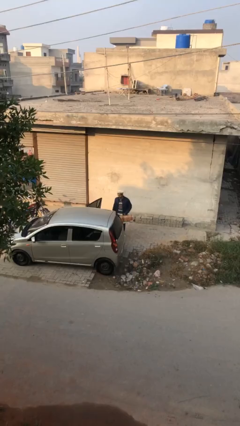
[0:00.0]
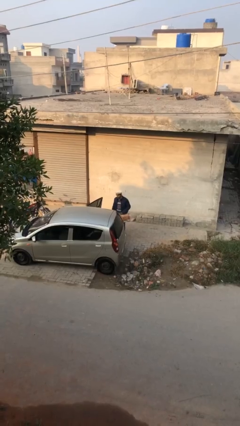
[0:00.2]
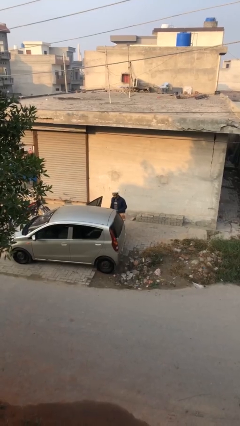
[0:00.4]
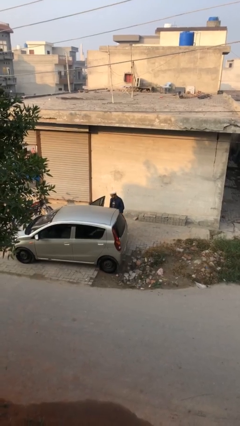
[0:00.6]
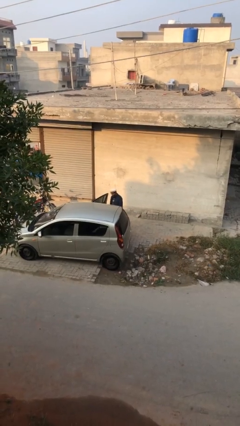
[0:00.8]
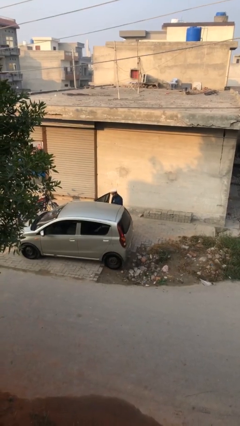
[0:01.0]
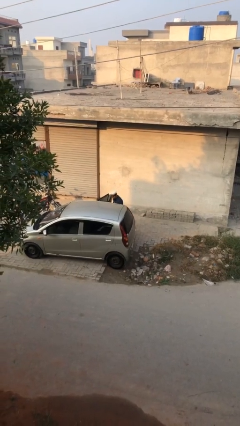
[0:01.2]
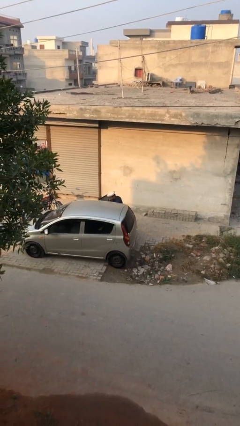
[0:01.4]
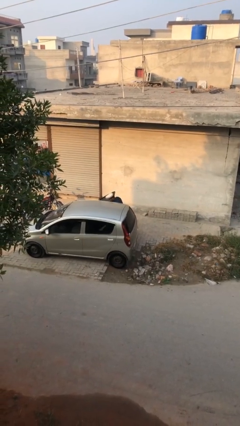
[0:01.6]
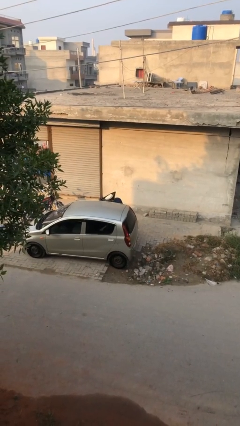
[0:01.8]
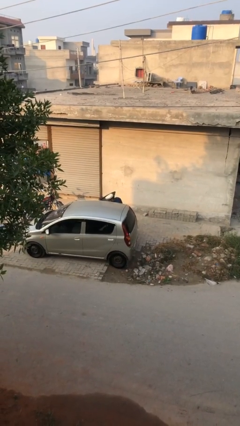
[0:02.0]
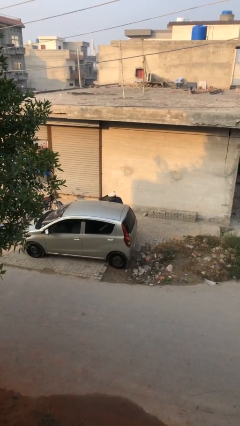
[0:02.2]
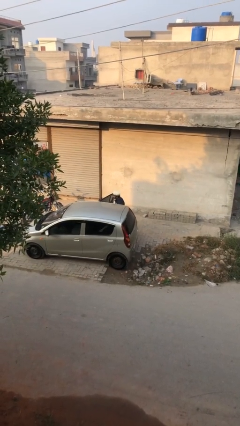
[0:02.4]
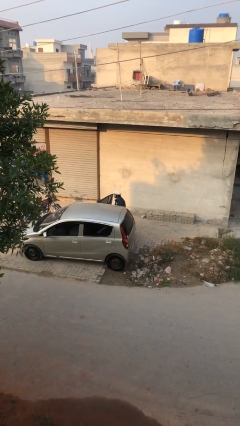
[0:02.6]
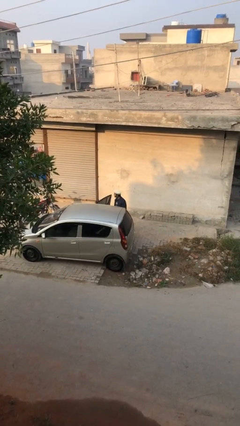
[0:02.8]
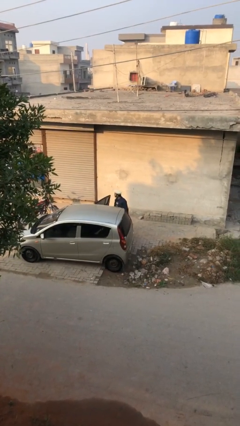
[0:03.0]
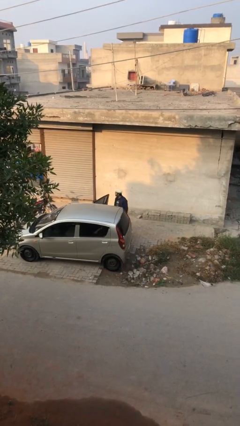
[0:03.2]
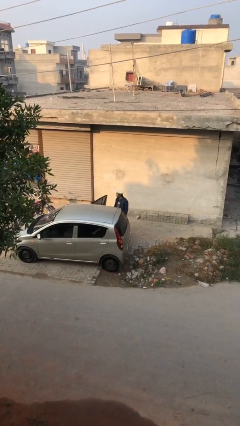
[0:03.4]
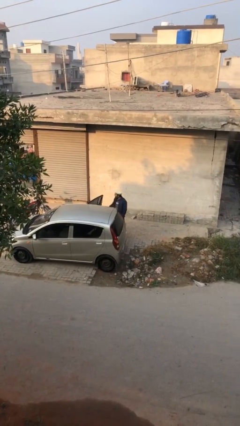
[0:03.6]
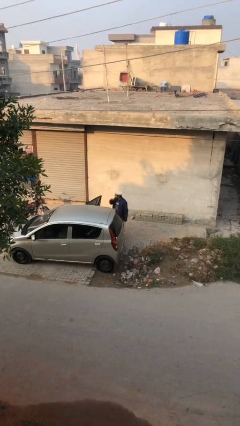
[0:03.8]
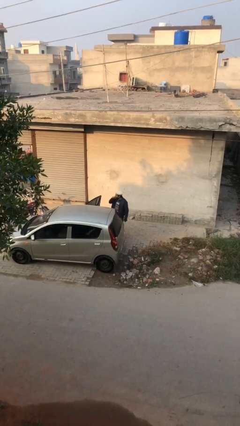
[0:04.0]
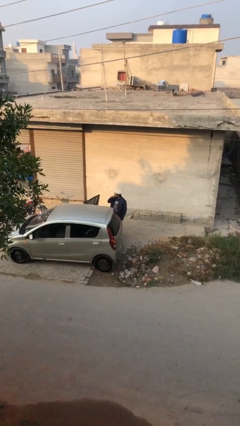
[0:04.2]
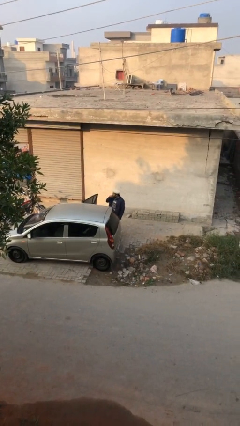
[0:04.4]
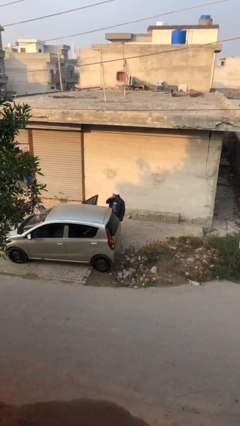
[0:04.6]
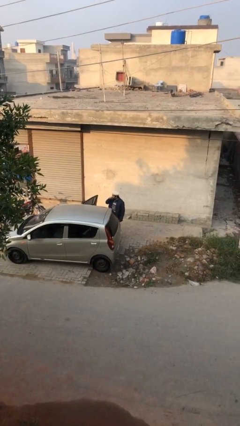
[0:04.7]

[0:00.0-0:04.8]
person loads car

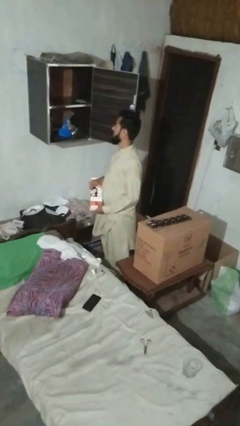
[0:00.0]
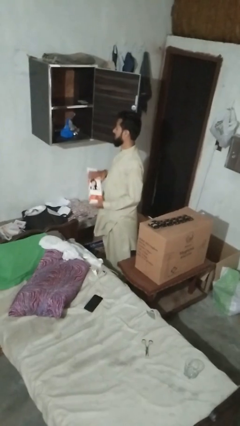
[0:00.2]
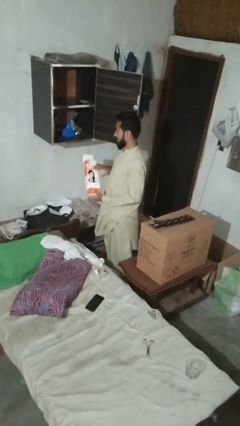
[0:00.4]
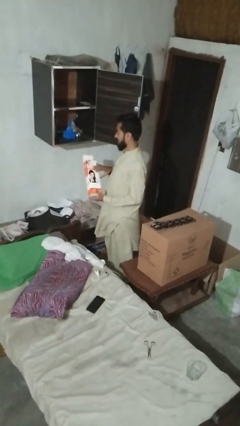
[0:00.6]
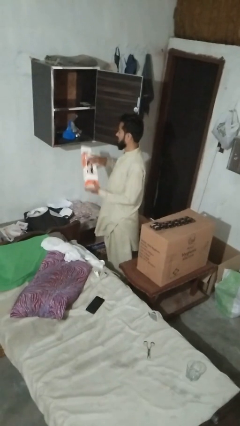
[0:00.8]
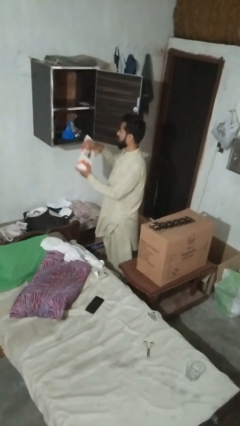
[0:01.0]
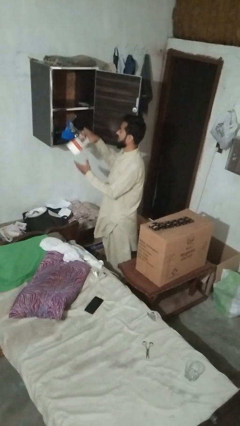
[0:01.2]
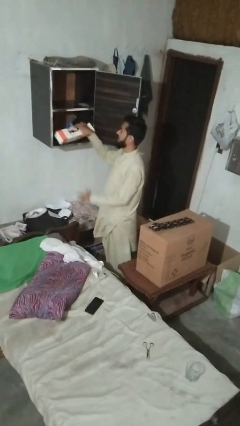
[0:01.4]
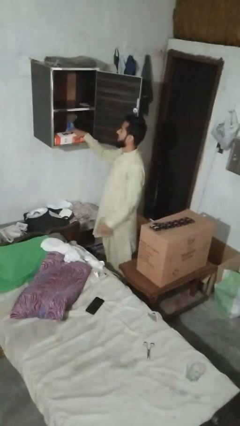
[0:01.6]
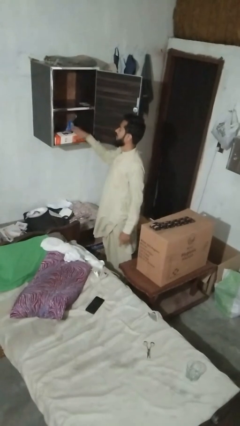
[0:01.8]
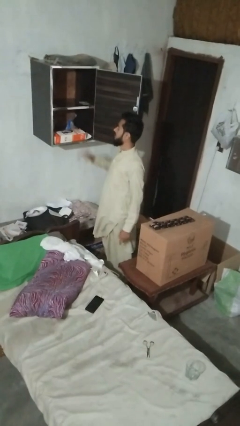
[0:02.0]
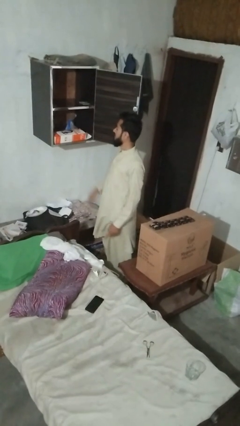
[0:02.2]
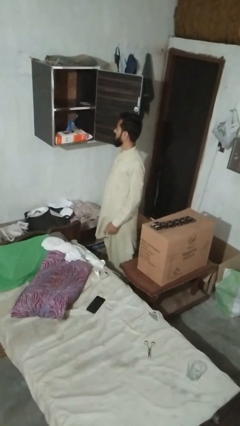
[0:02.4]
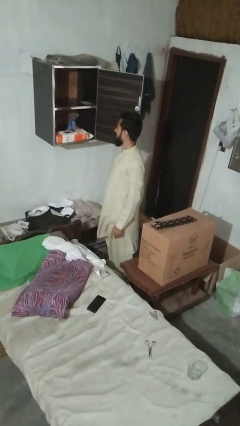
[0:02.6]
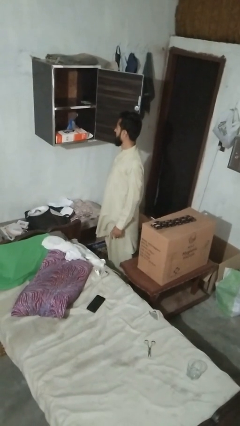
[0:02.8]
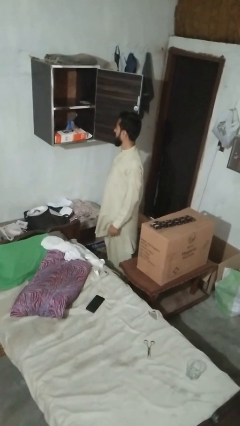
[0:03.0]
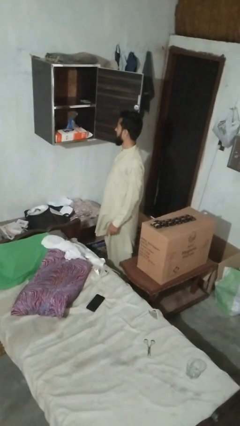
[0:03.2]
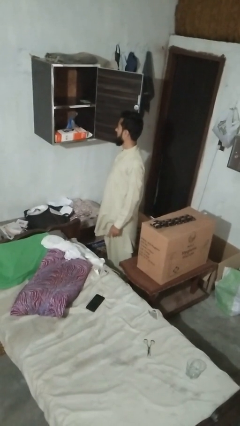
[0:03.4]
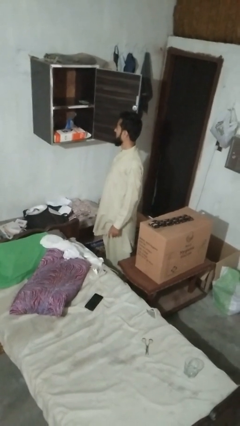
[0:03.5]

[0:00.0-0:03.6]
person puts down object into cabinet

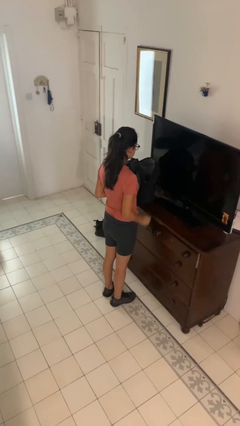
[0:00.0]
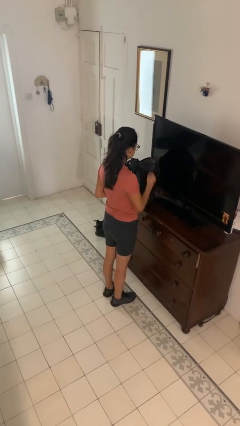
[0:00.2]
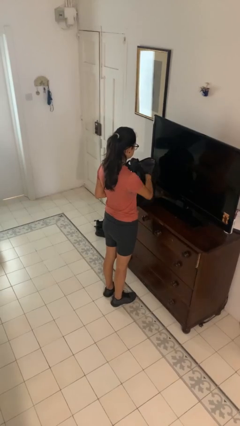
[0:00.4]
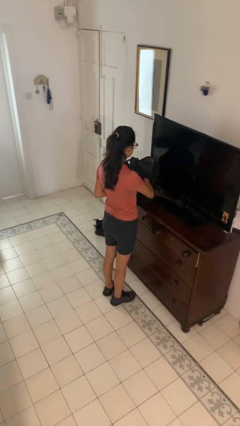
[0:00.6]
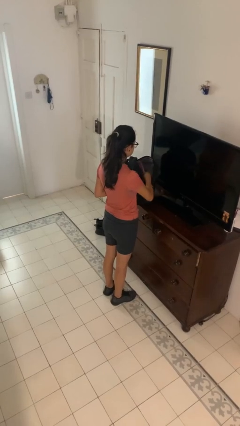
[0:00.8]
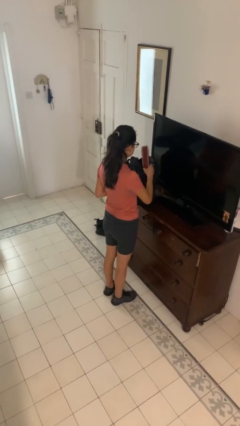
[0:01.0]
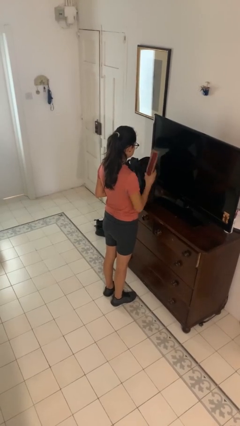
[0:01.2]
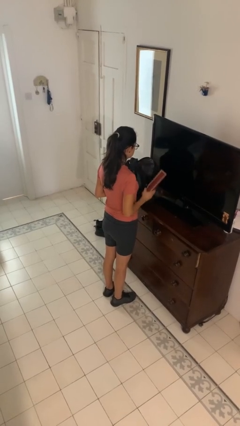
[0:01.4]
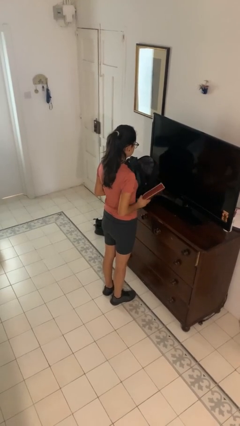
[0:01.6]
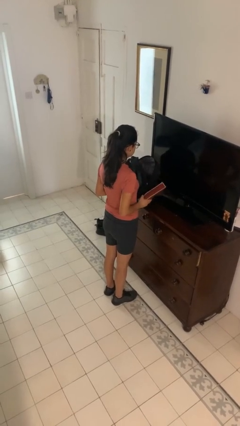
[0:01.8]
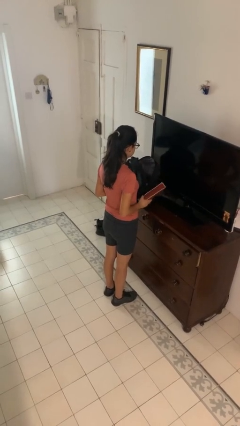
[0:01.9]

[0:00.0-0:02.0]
person takes object from bag

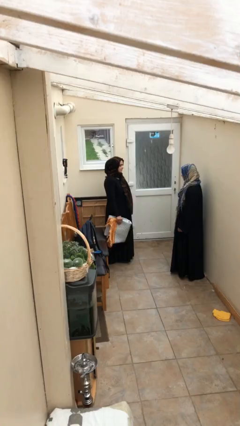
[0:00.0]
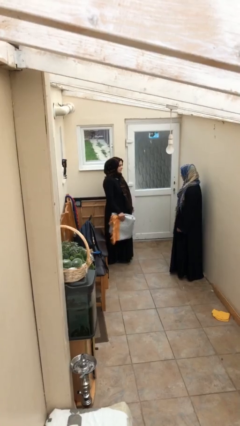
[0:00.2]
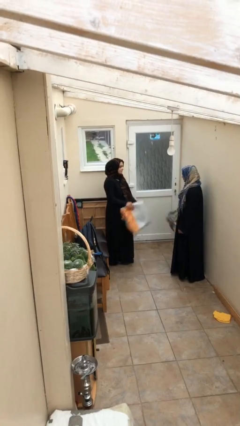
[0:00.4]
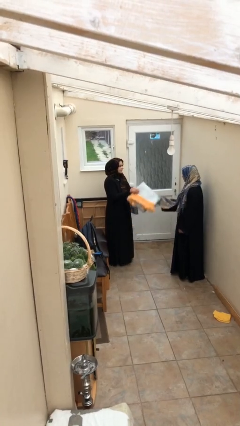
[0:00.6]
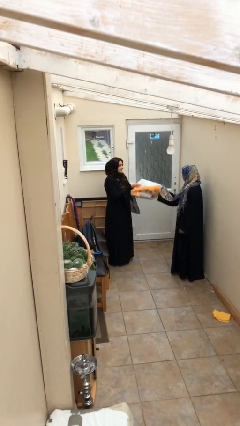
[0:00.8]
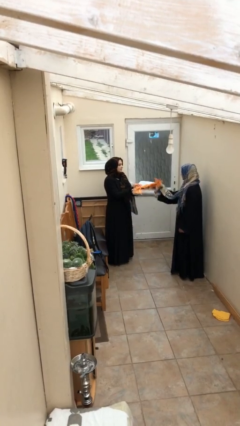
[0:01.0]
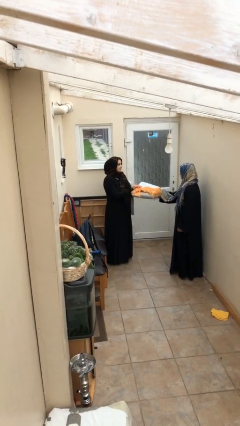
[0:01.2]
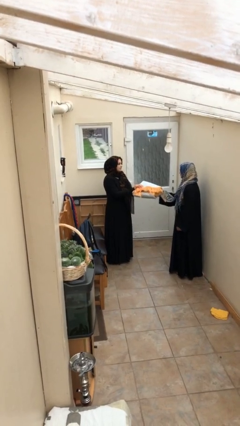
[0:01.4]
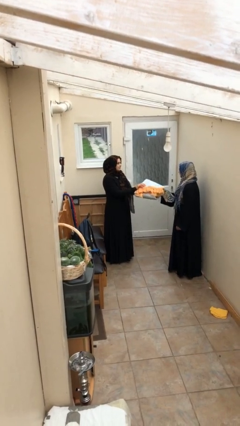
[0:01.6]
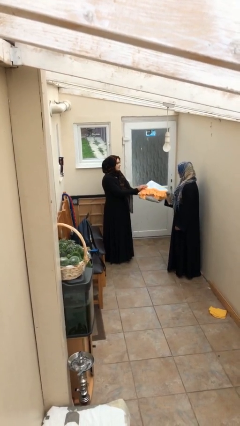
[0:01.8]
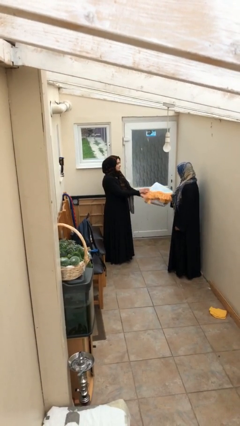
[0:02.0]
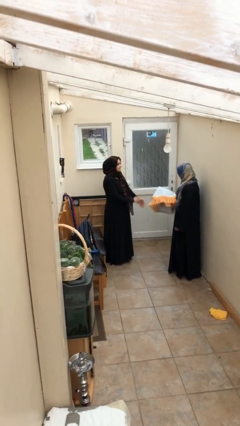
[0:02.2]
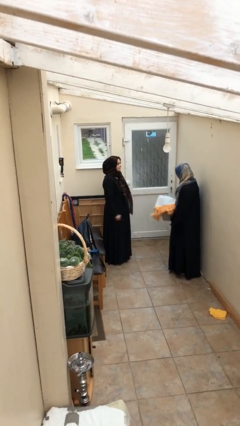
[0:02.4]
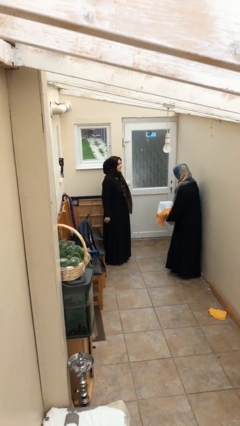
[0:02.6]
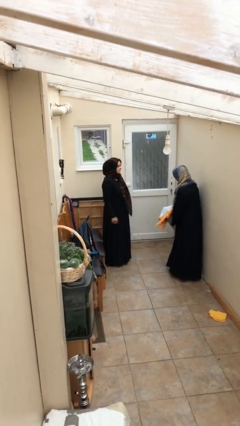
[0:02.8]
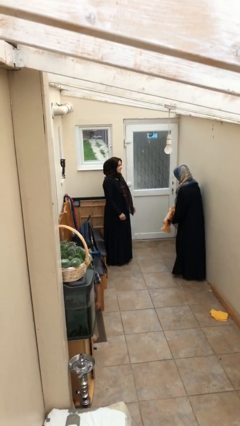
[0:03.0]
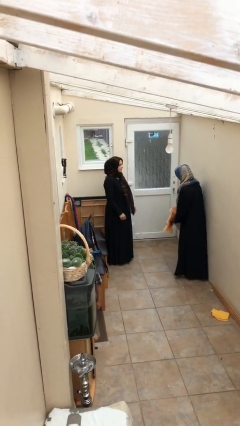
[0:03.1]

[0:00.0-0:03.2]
person transfers object to person

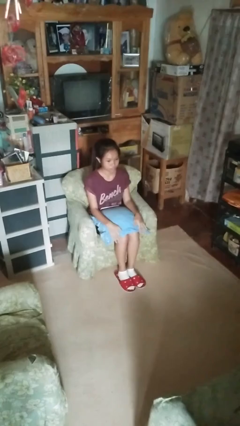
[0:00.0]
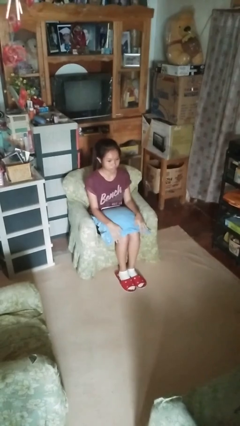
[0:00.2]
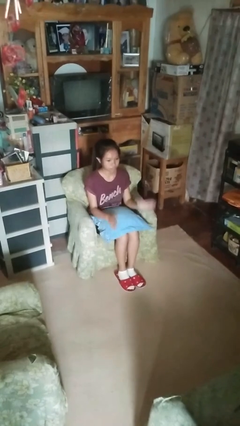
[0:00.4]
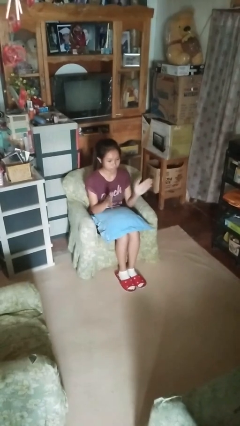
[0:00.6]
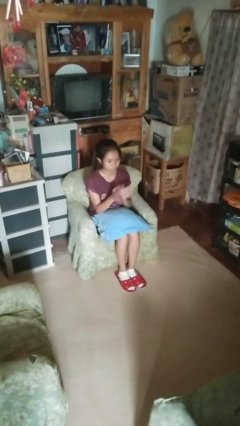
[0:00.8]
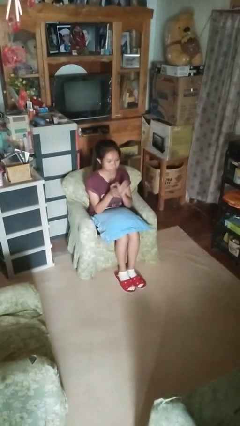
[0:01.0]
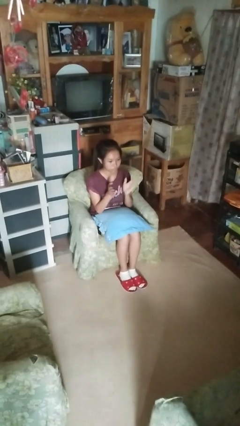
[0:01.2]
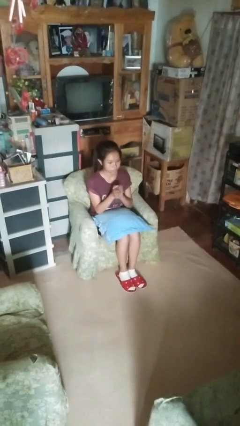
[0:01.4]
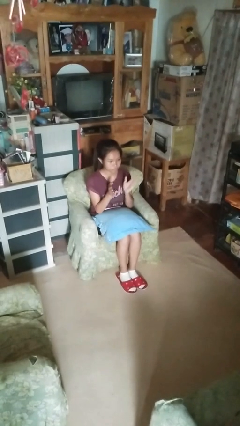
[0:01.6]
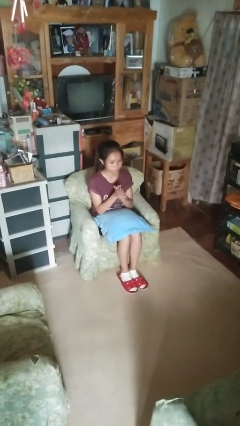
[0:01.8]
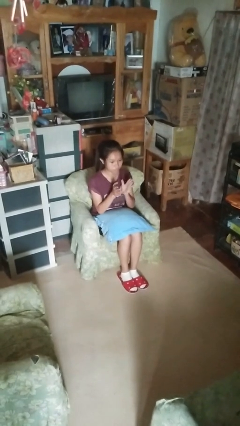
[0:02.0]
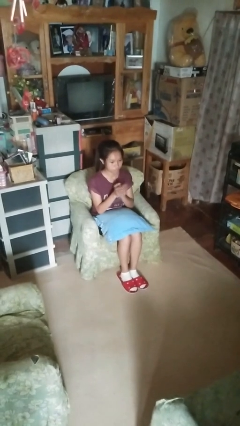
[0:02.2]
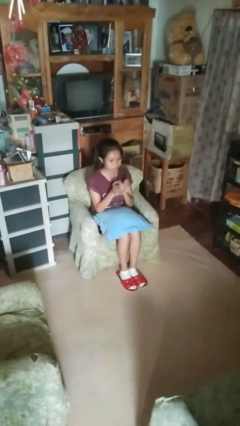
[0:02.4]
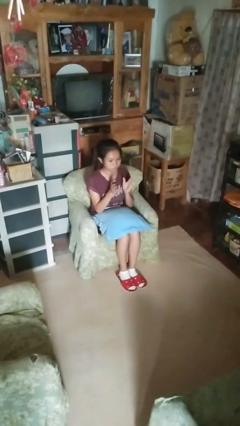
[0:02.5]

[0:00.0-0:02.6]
person claps hands

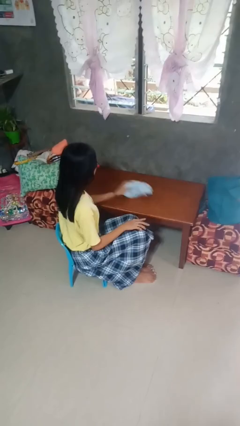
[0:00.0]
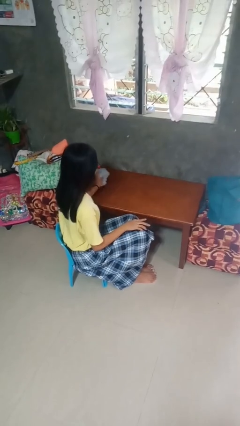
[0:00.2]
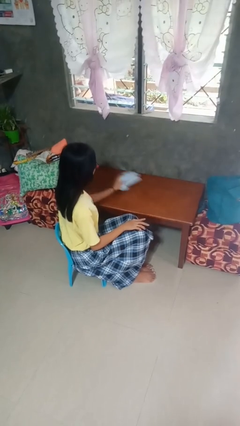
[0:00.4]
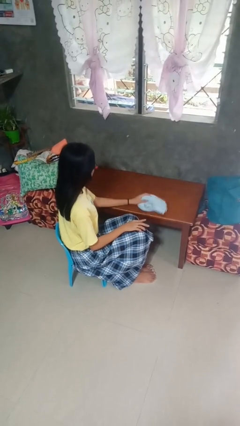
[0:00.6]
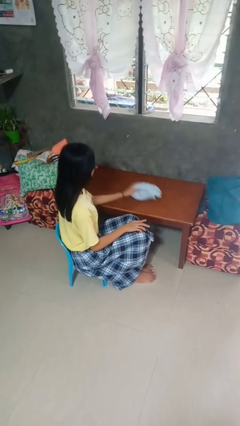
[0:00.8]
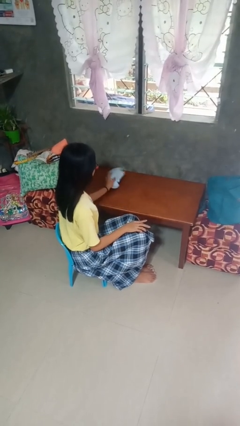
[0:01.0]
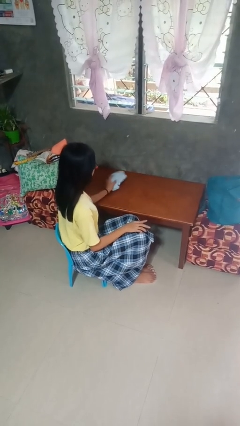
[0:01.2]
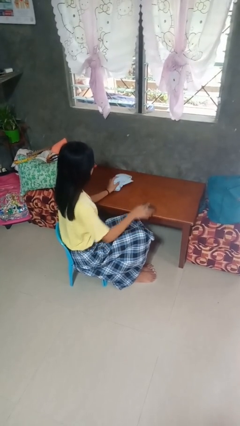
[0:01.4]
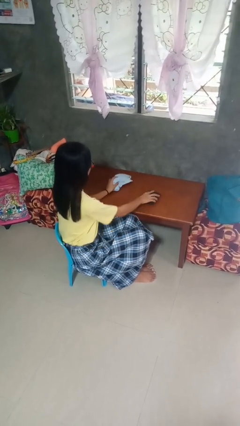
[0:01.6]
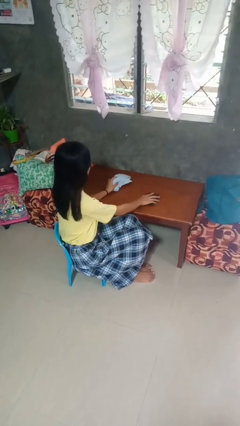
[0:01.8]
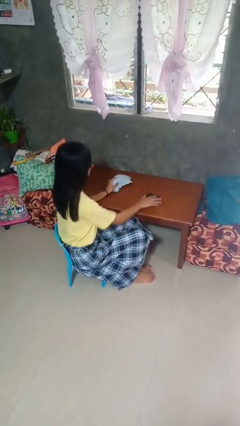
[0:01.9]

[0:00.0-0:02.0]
person cleans table with rag
